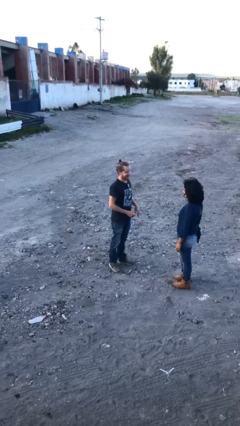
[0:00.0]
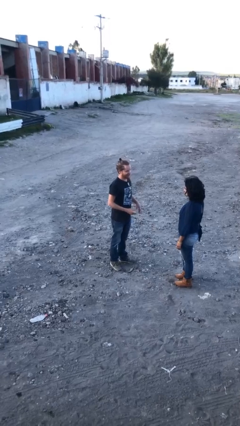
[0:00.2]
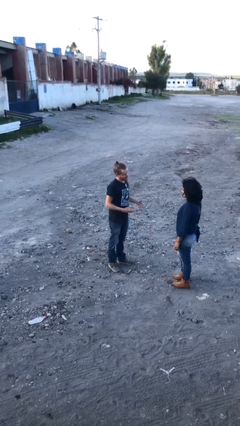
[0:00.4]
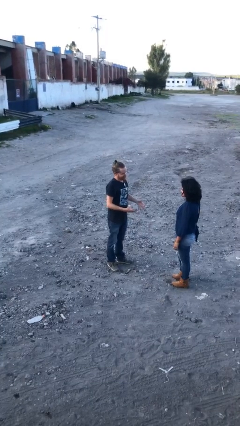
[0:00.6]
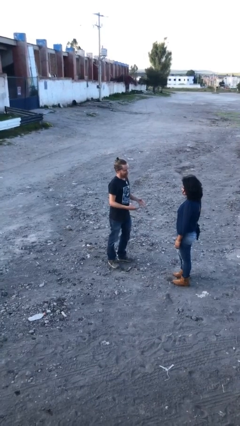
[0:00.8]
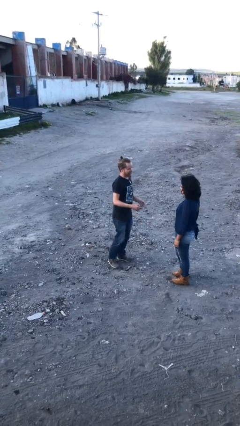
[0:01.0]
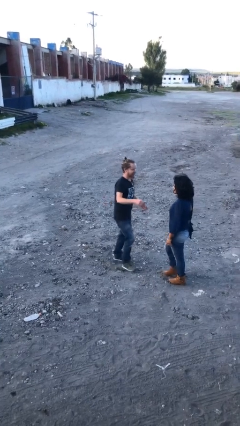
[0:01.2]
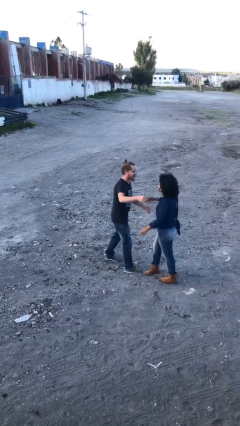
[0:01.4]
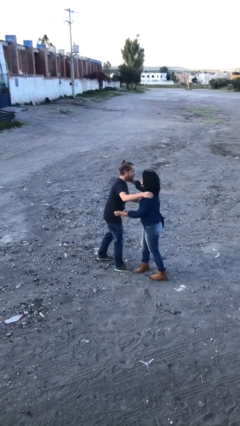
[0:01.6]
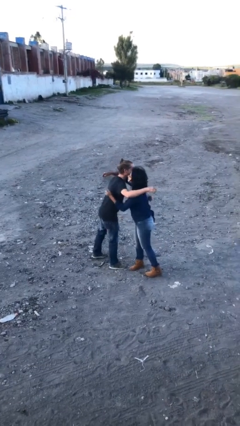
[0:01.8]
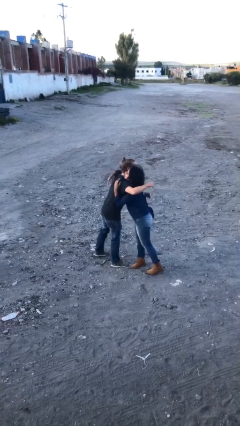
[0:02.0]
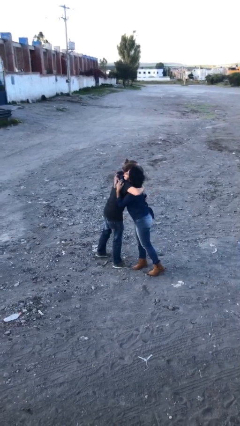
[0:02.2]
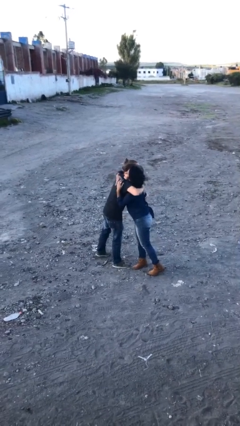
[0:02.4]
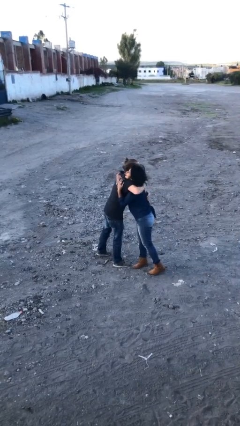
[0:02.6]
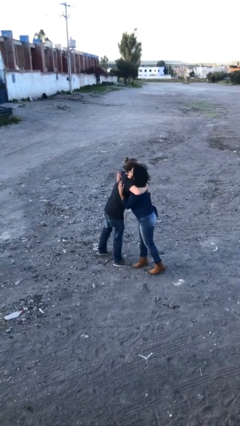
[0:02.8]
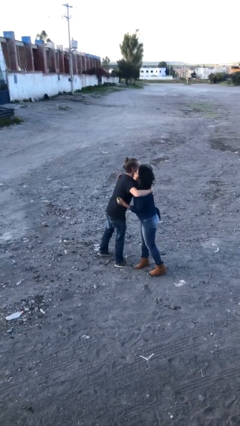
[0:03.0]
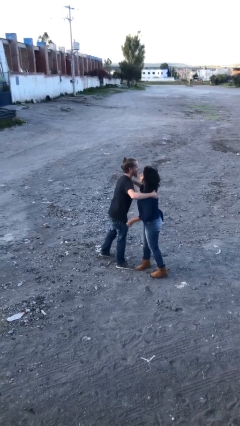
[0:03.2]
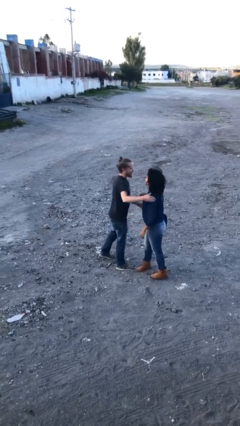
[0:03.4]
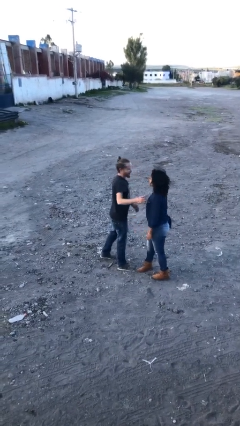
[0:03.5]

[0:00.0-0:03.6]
person embraces person

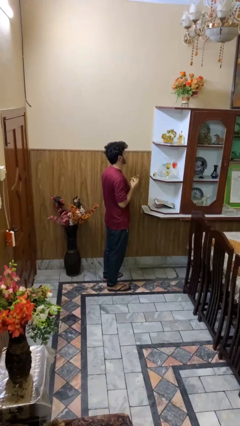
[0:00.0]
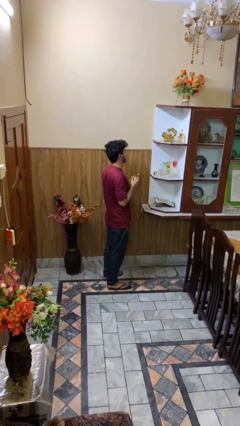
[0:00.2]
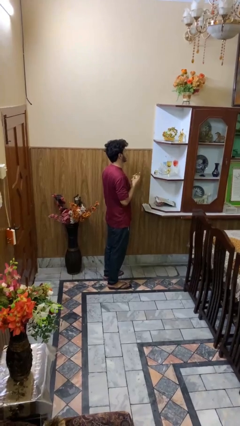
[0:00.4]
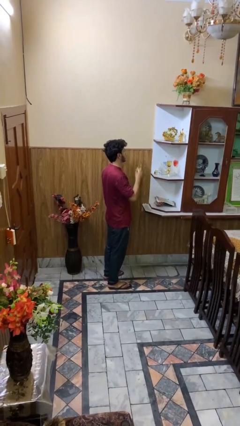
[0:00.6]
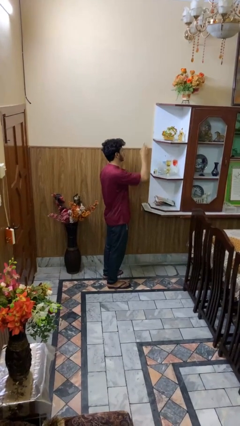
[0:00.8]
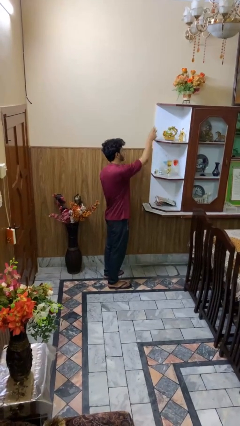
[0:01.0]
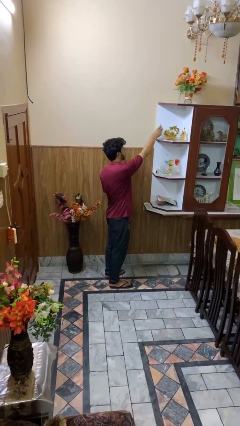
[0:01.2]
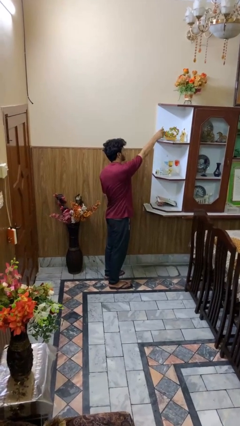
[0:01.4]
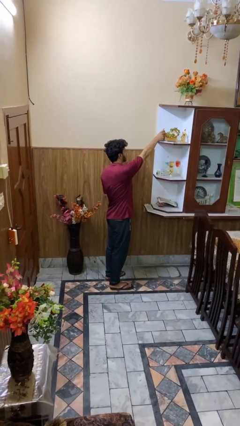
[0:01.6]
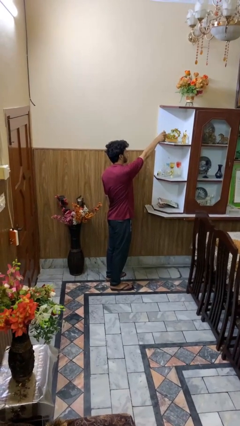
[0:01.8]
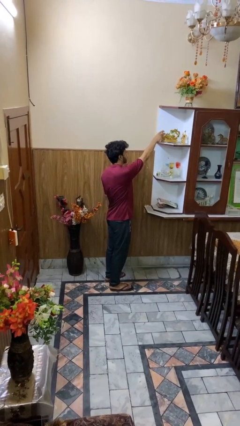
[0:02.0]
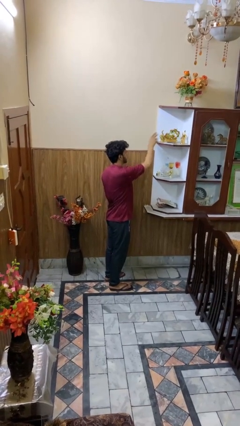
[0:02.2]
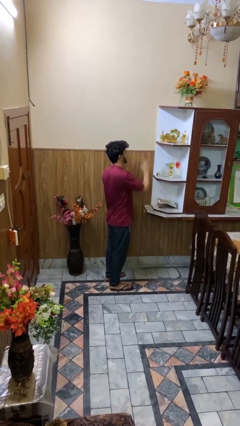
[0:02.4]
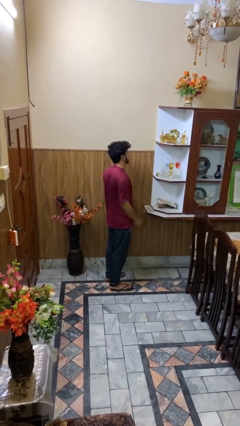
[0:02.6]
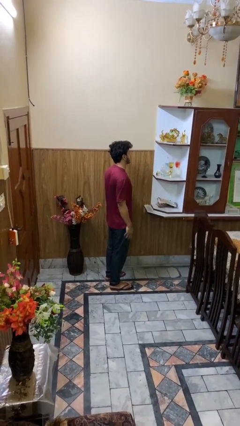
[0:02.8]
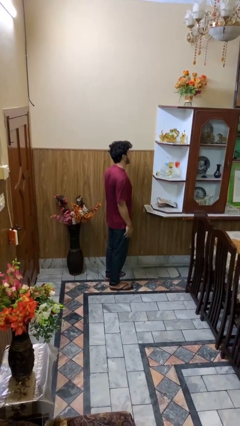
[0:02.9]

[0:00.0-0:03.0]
person puts down object on shelf

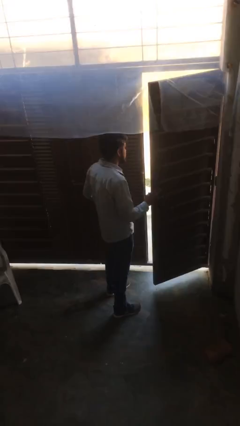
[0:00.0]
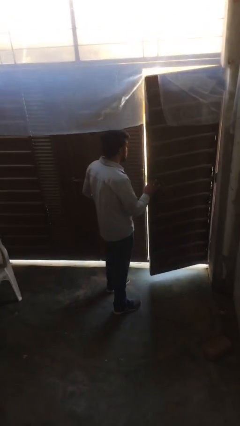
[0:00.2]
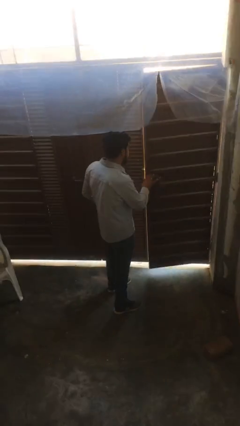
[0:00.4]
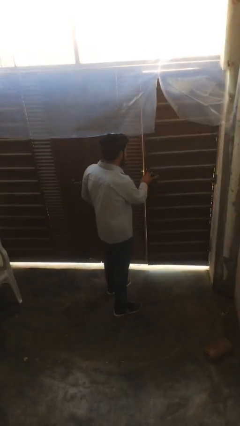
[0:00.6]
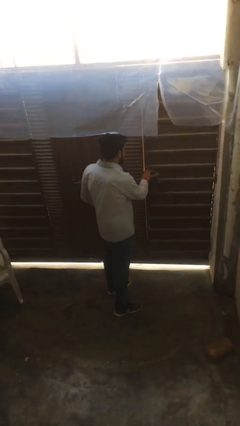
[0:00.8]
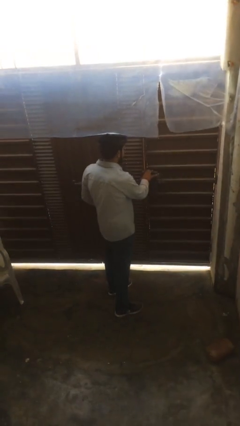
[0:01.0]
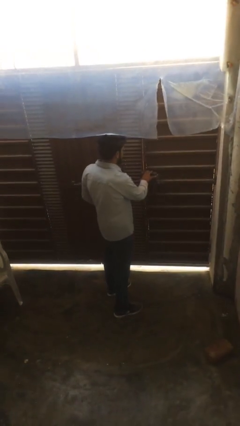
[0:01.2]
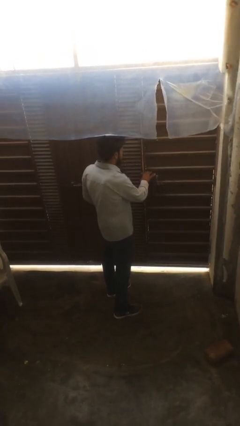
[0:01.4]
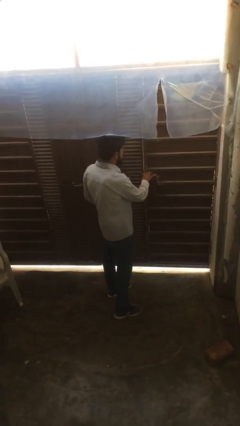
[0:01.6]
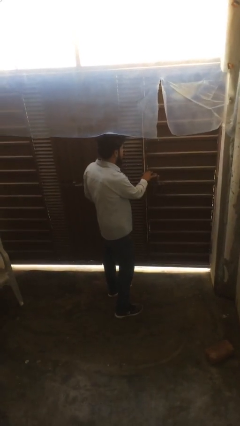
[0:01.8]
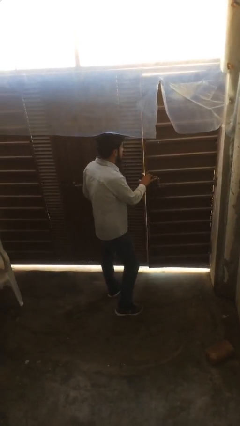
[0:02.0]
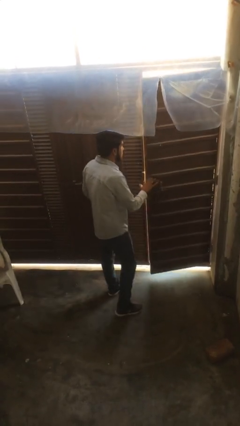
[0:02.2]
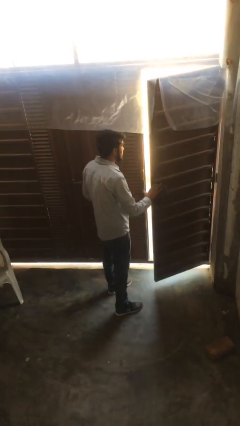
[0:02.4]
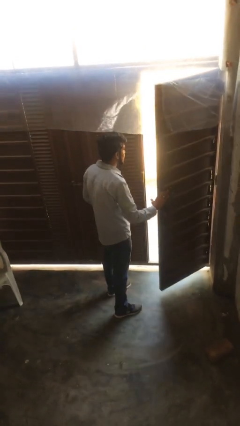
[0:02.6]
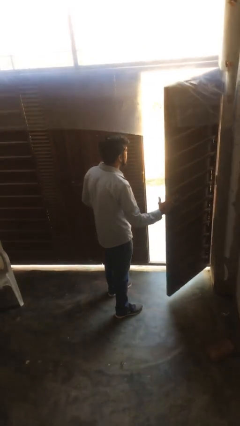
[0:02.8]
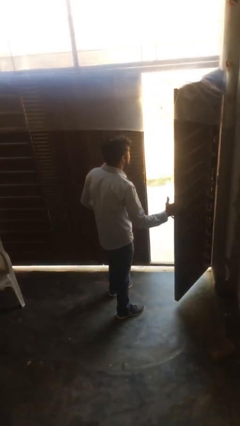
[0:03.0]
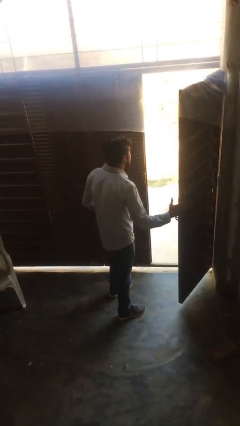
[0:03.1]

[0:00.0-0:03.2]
person closes facility door

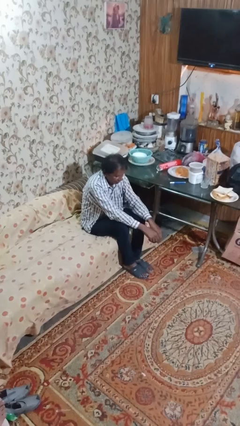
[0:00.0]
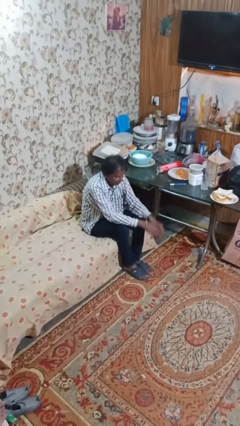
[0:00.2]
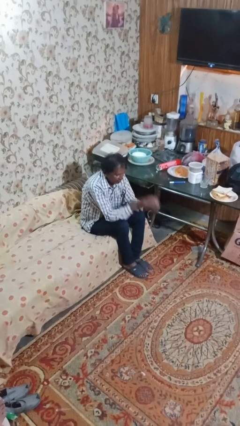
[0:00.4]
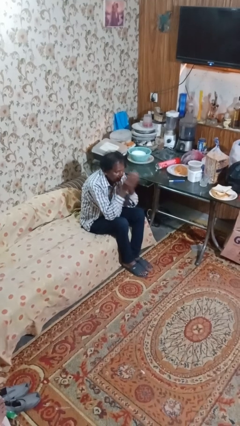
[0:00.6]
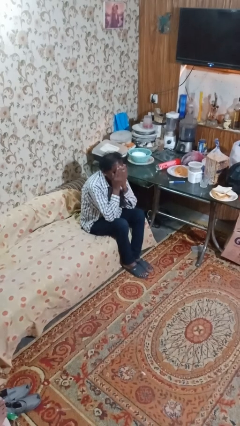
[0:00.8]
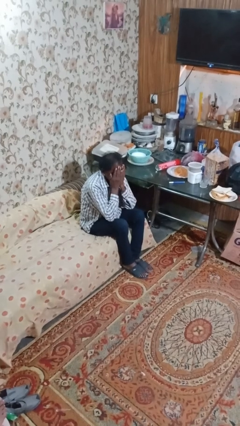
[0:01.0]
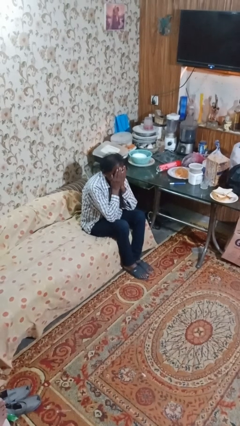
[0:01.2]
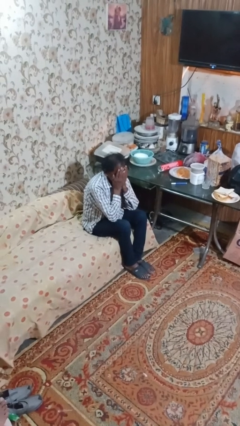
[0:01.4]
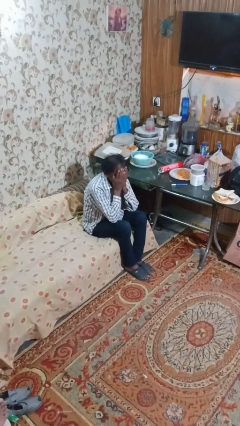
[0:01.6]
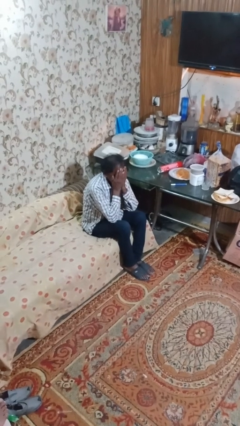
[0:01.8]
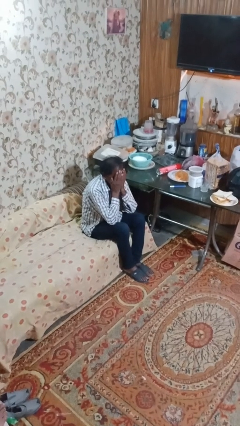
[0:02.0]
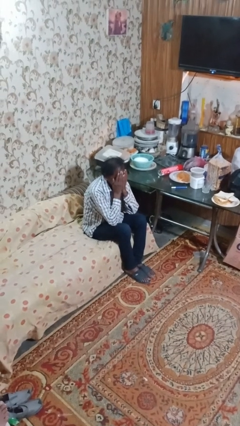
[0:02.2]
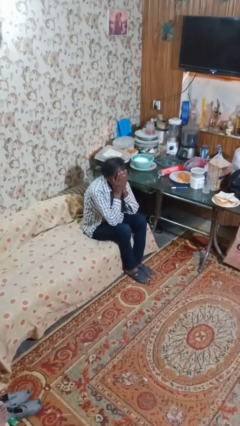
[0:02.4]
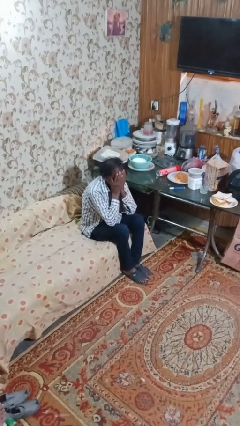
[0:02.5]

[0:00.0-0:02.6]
person covers face with hands

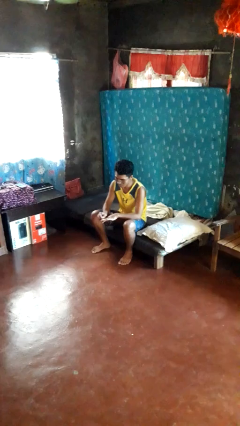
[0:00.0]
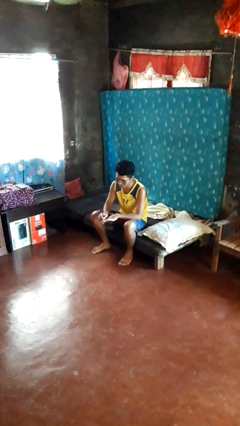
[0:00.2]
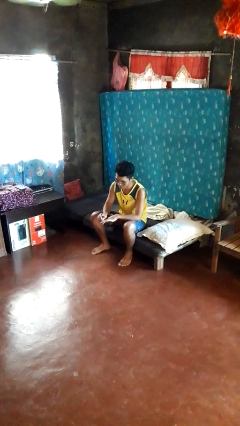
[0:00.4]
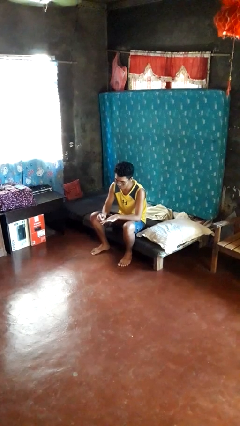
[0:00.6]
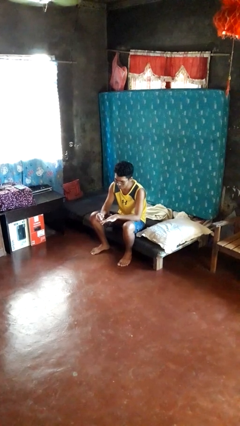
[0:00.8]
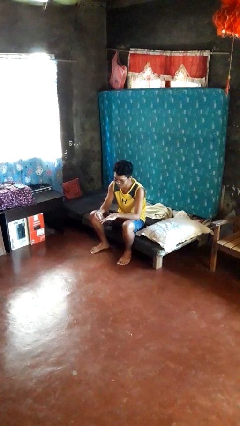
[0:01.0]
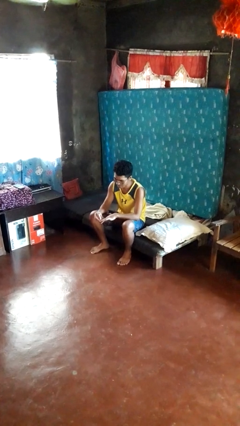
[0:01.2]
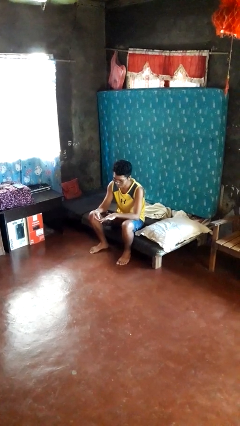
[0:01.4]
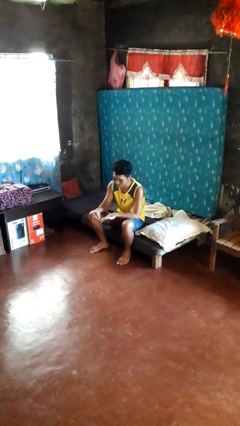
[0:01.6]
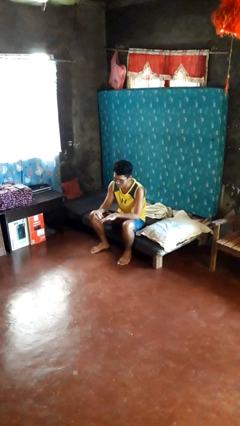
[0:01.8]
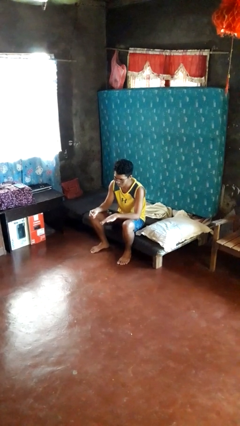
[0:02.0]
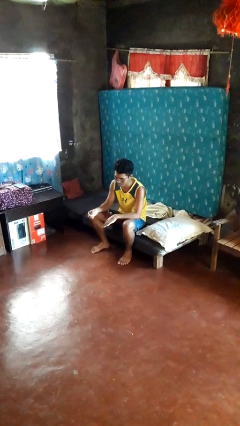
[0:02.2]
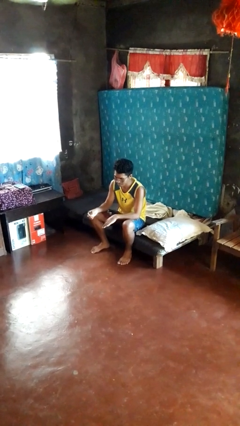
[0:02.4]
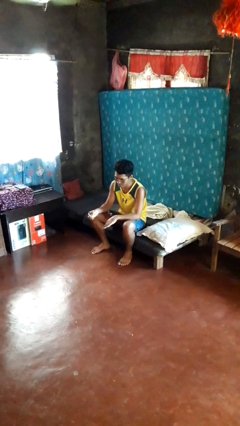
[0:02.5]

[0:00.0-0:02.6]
person files fingernails

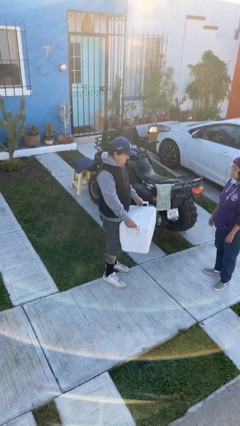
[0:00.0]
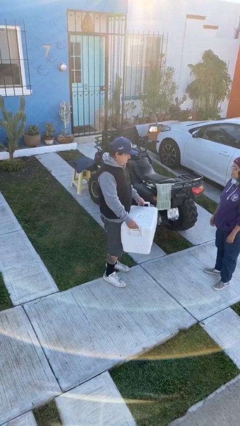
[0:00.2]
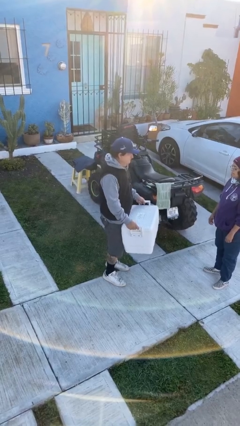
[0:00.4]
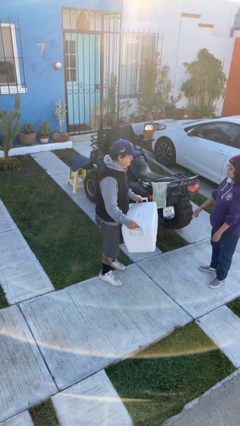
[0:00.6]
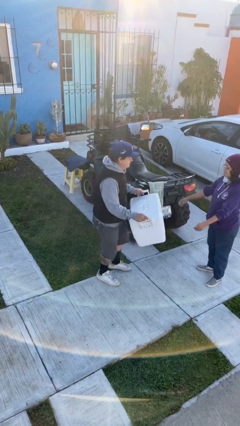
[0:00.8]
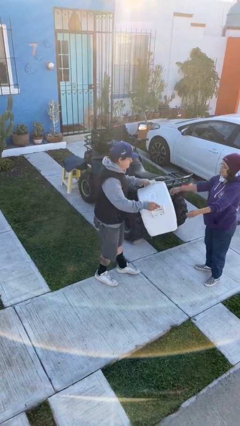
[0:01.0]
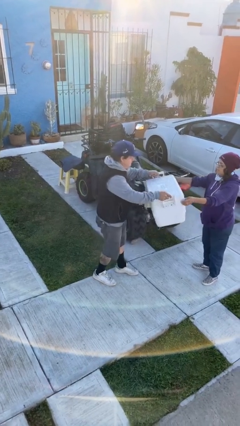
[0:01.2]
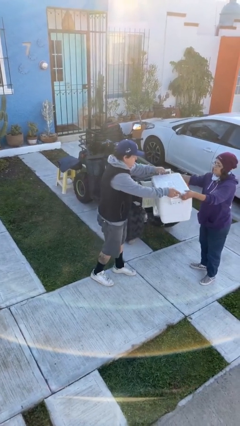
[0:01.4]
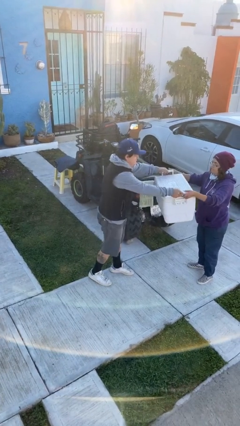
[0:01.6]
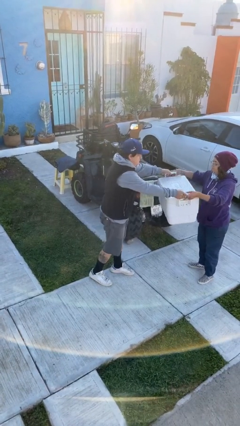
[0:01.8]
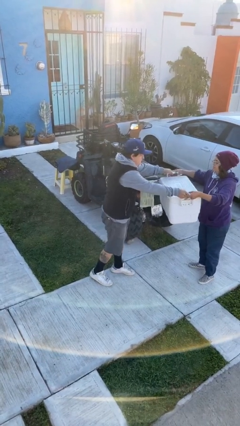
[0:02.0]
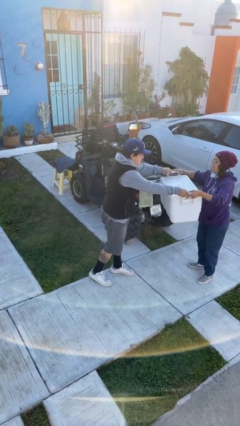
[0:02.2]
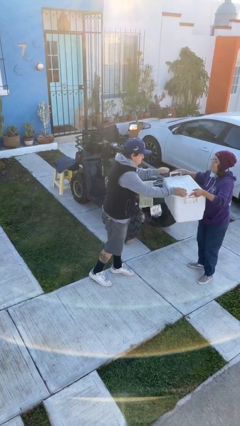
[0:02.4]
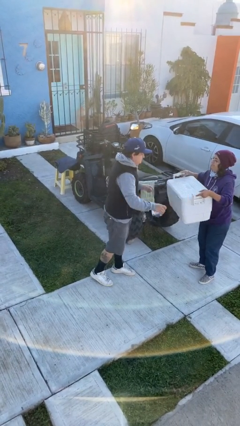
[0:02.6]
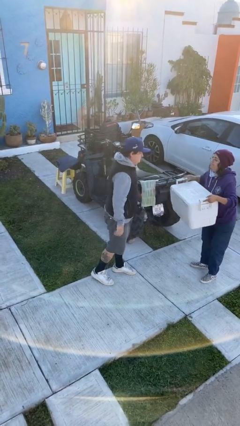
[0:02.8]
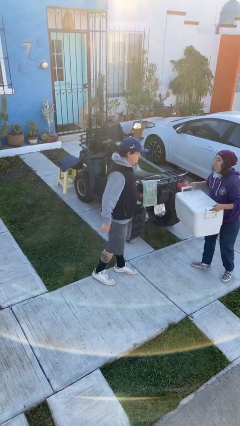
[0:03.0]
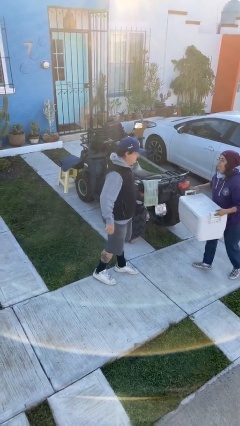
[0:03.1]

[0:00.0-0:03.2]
person transfers object to person
